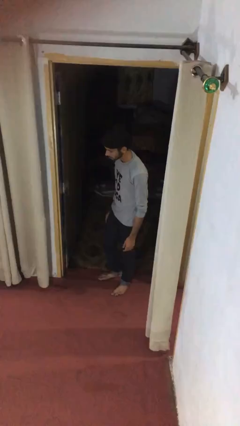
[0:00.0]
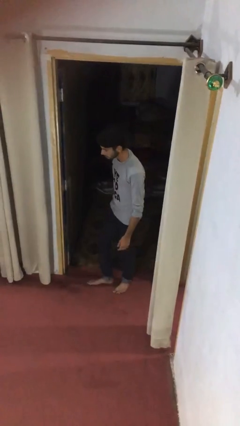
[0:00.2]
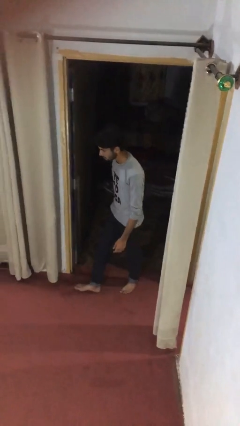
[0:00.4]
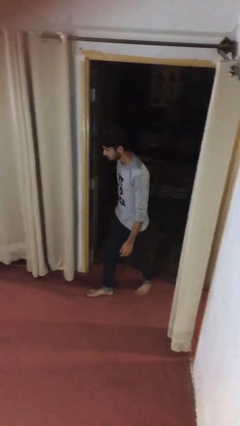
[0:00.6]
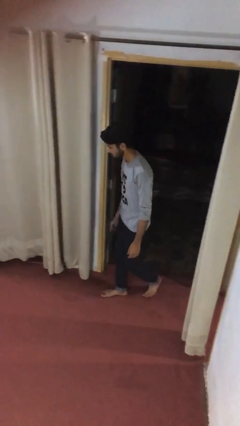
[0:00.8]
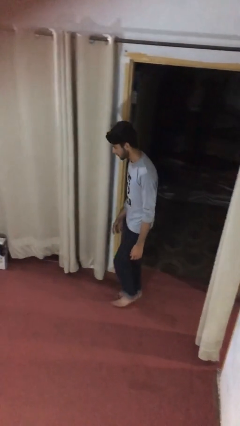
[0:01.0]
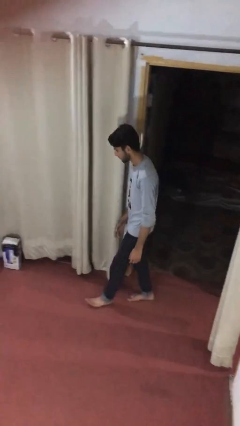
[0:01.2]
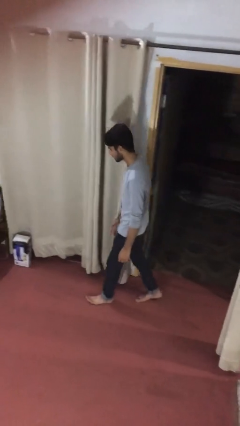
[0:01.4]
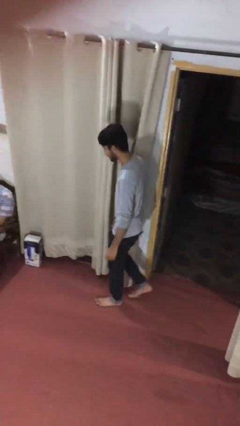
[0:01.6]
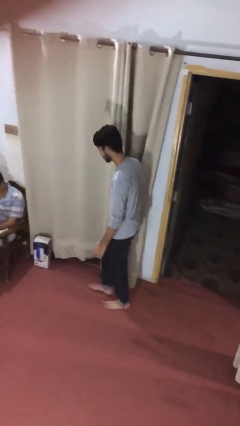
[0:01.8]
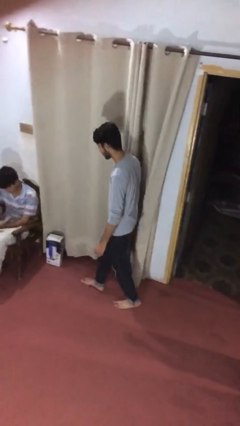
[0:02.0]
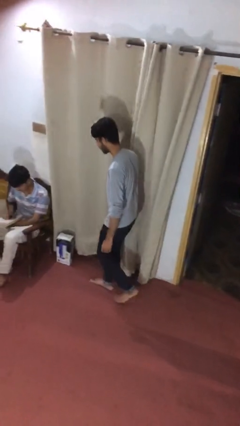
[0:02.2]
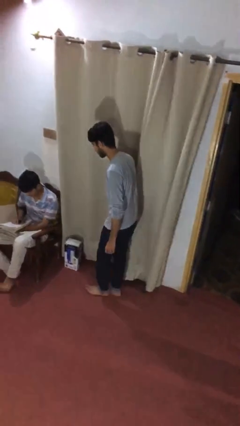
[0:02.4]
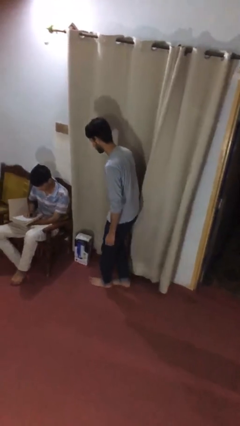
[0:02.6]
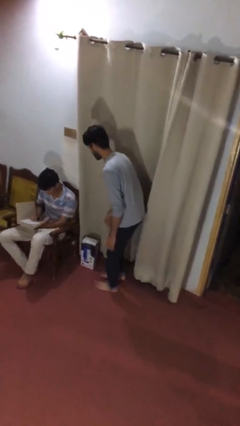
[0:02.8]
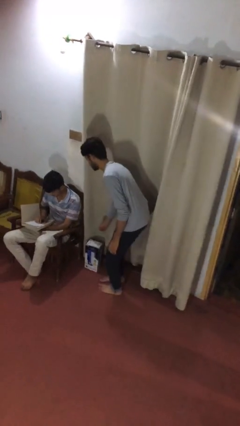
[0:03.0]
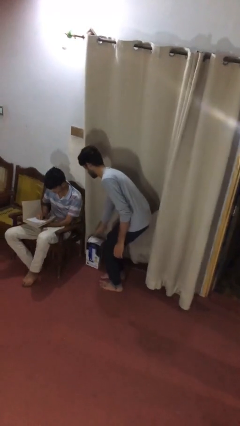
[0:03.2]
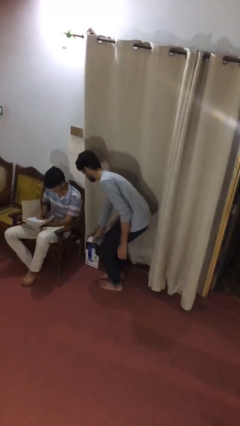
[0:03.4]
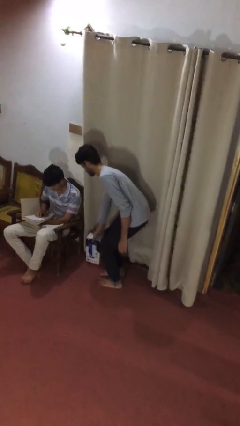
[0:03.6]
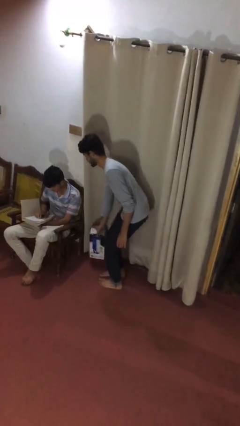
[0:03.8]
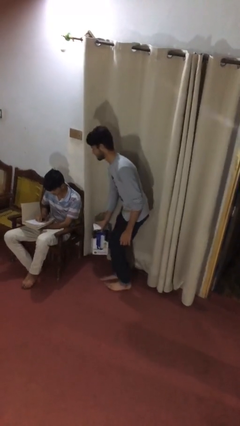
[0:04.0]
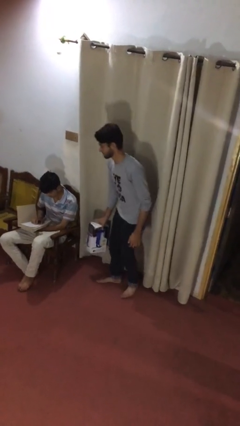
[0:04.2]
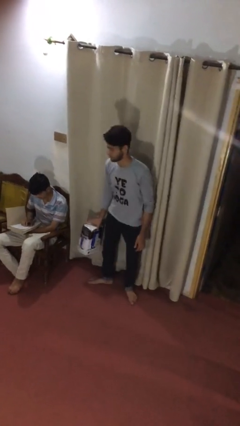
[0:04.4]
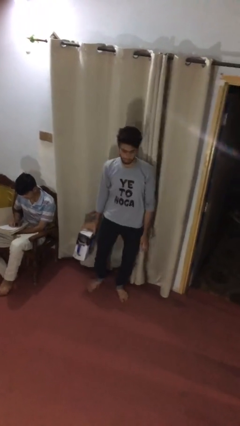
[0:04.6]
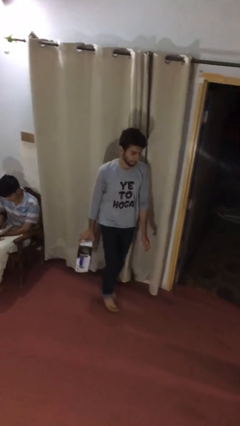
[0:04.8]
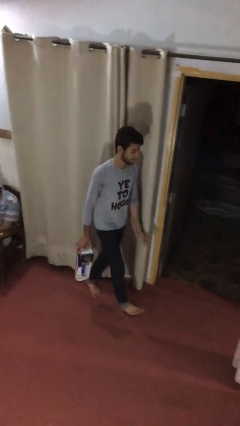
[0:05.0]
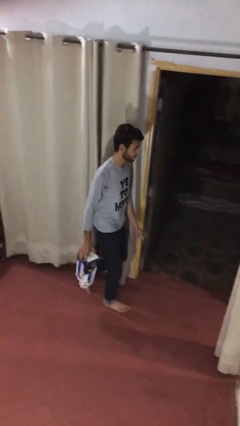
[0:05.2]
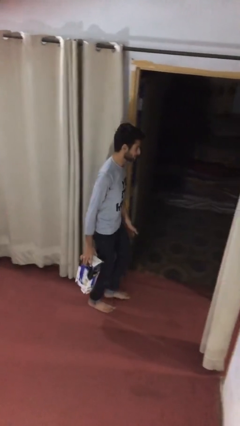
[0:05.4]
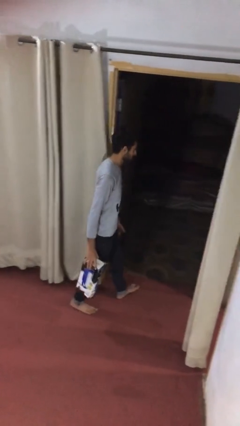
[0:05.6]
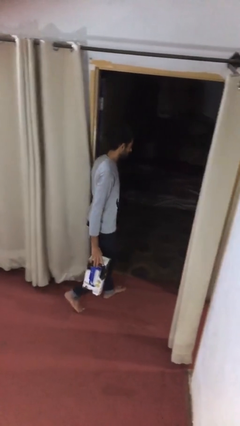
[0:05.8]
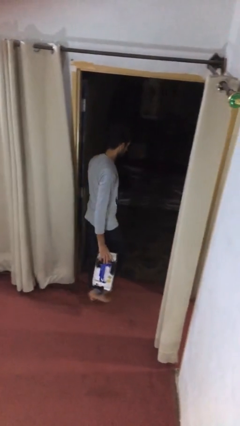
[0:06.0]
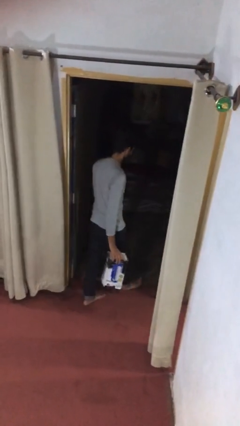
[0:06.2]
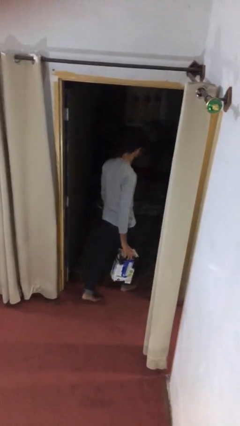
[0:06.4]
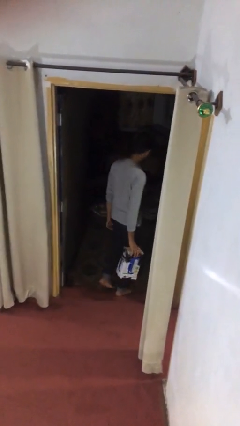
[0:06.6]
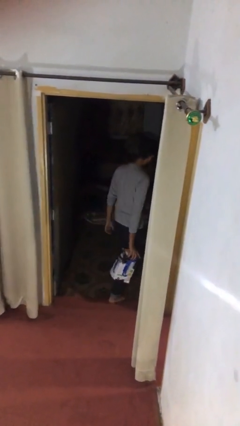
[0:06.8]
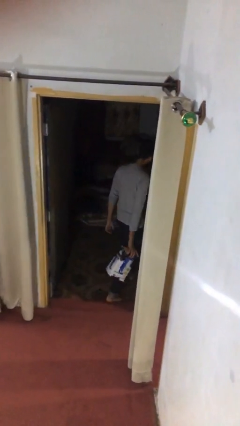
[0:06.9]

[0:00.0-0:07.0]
person steals object from person

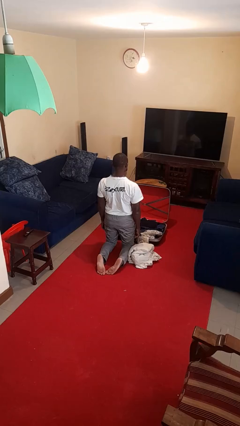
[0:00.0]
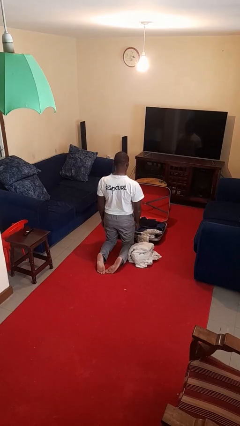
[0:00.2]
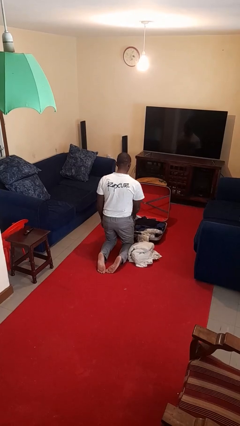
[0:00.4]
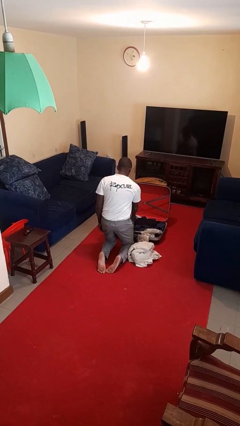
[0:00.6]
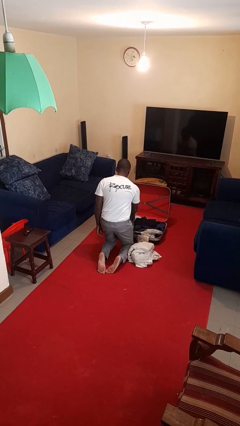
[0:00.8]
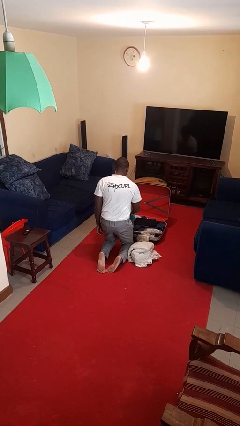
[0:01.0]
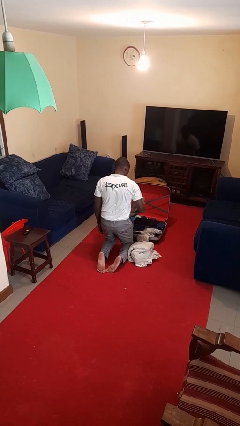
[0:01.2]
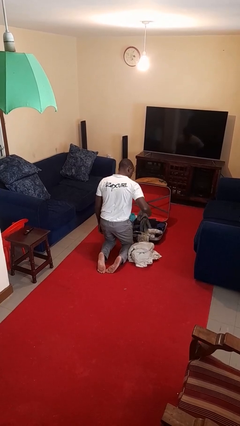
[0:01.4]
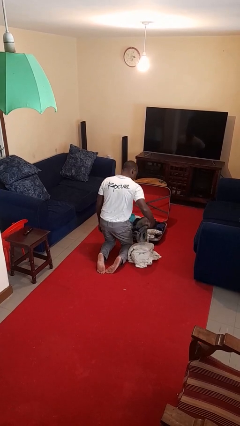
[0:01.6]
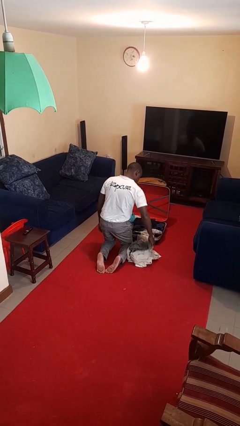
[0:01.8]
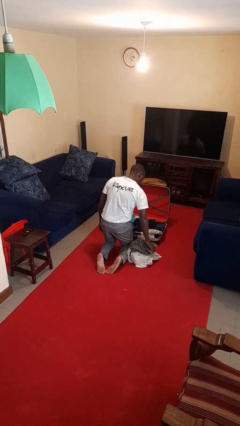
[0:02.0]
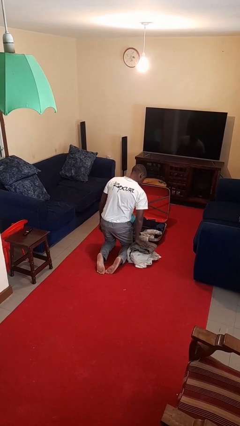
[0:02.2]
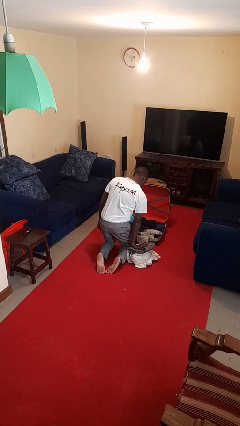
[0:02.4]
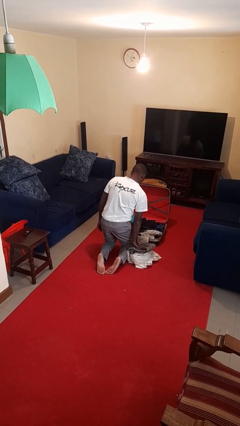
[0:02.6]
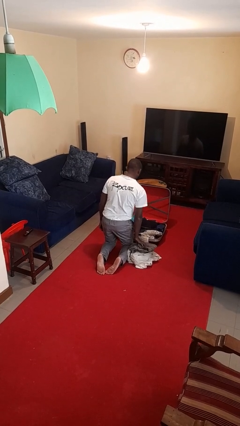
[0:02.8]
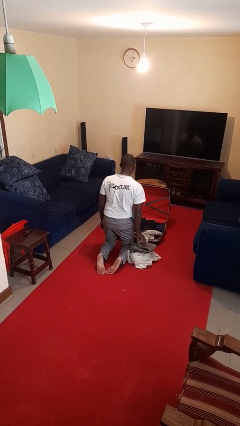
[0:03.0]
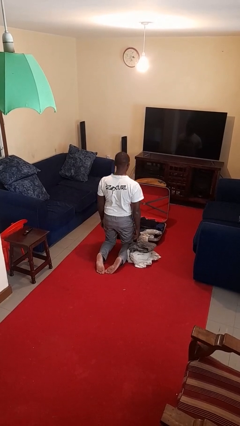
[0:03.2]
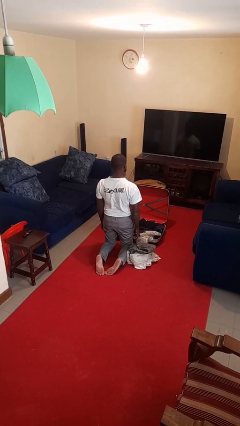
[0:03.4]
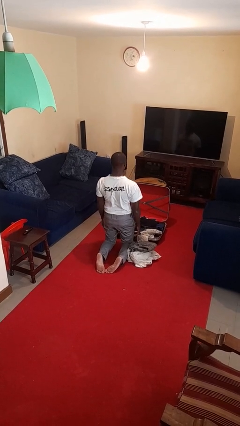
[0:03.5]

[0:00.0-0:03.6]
person unloads clothes from suitcase

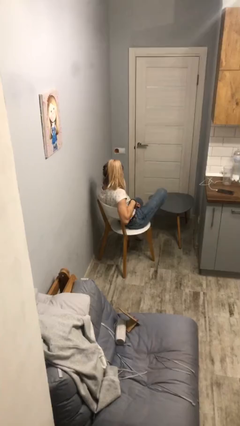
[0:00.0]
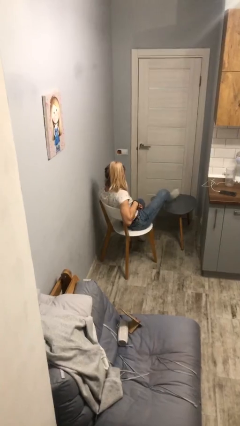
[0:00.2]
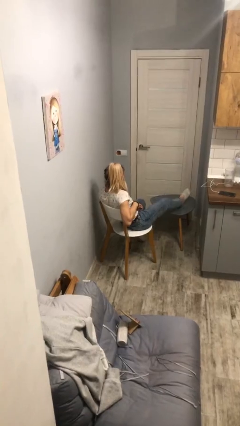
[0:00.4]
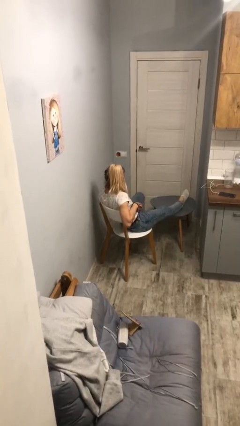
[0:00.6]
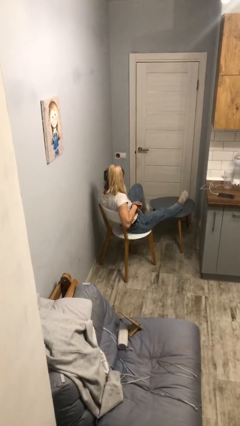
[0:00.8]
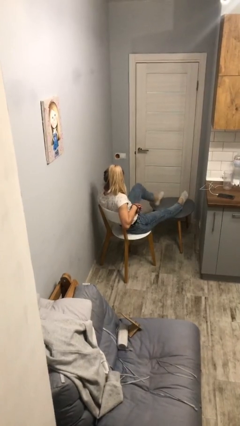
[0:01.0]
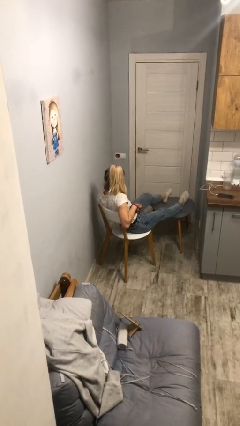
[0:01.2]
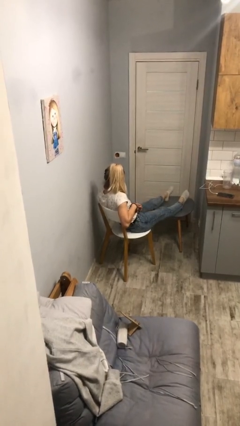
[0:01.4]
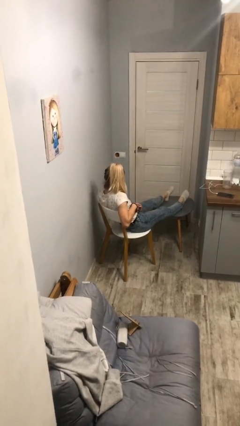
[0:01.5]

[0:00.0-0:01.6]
person puts feet up

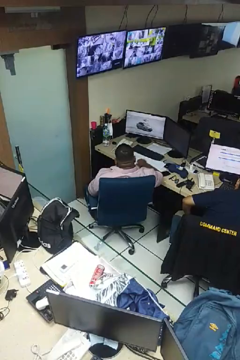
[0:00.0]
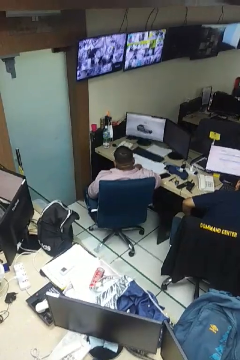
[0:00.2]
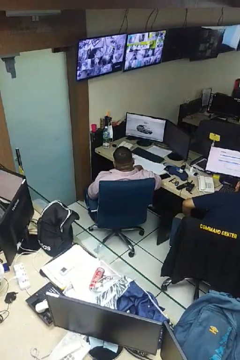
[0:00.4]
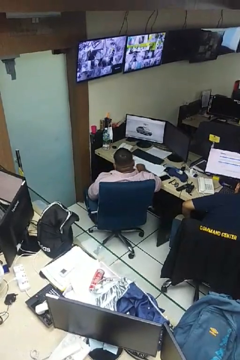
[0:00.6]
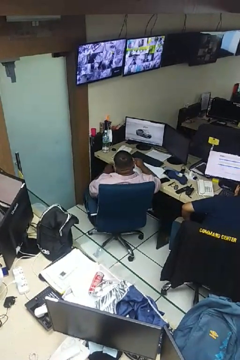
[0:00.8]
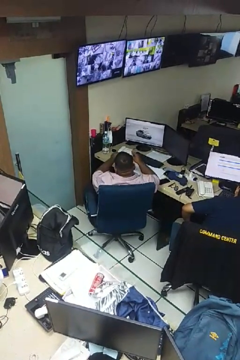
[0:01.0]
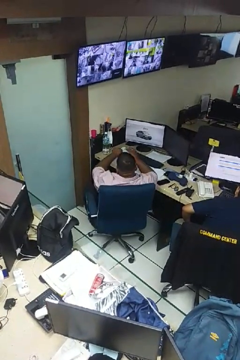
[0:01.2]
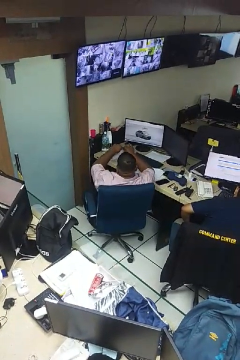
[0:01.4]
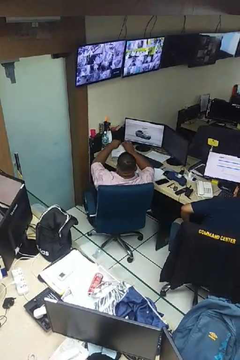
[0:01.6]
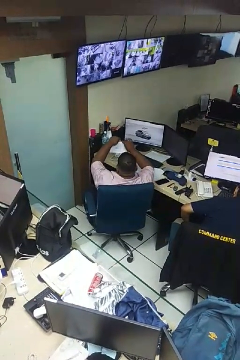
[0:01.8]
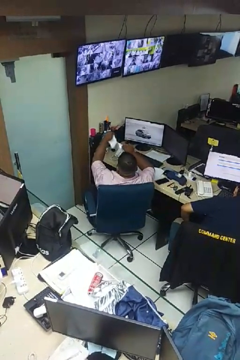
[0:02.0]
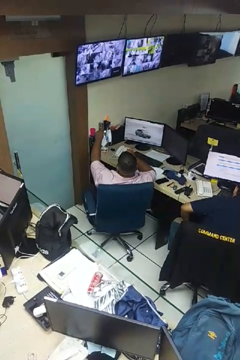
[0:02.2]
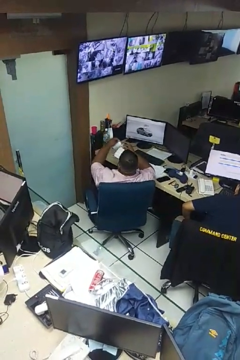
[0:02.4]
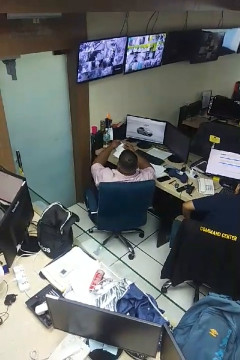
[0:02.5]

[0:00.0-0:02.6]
person tears paper

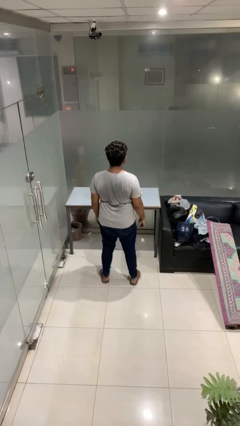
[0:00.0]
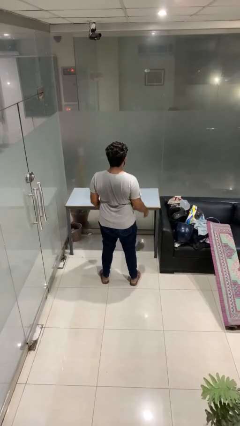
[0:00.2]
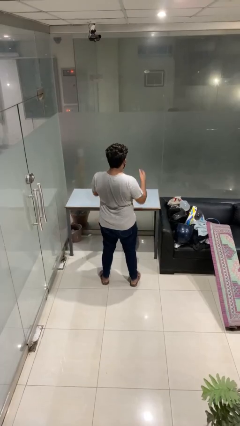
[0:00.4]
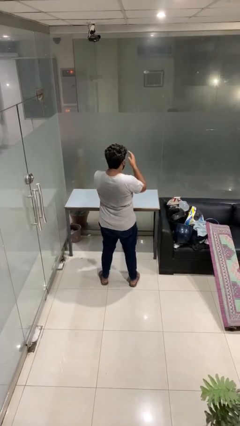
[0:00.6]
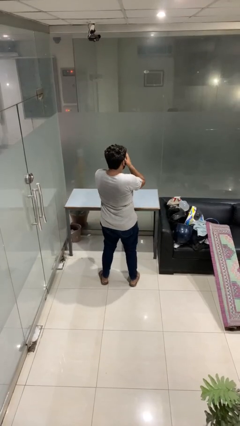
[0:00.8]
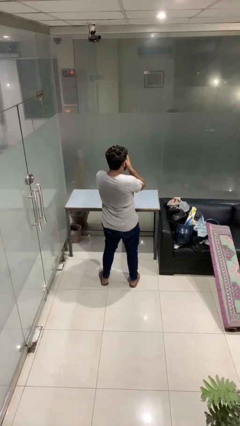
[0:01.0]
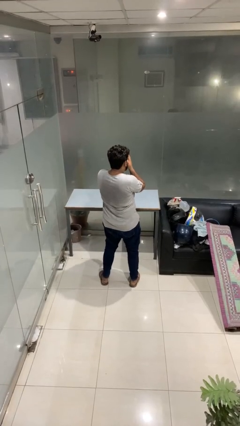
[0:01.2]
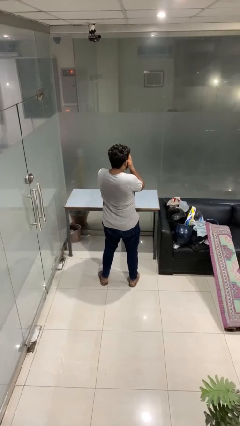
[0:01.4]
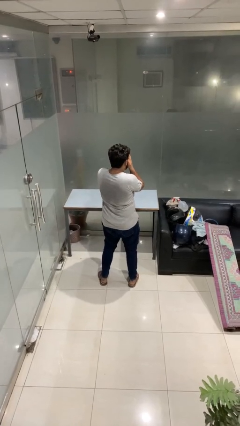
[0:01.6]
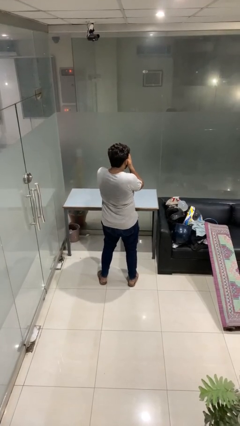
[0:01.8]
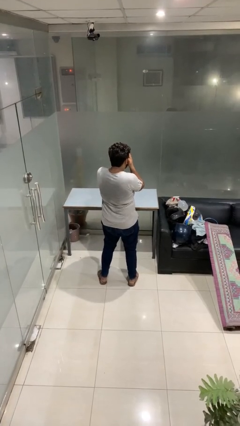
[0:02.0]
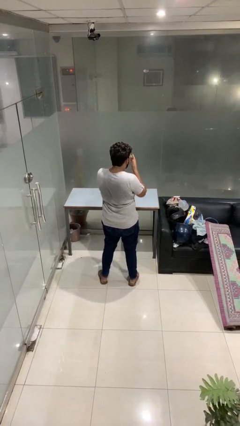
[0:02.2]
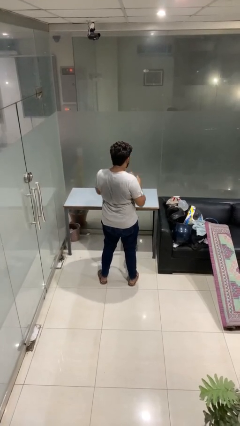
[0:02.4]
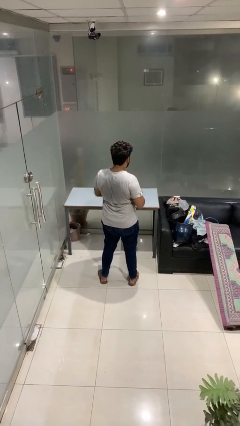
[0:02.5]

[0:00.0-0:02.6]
person covers face with hands

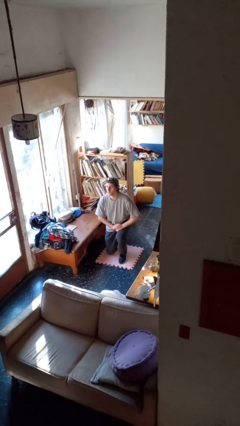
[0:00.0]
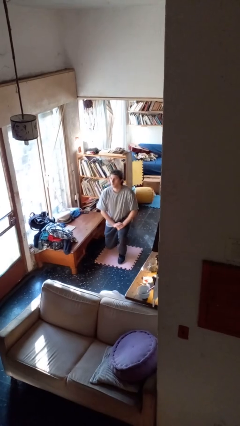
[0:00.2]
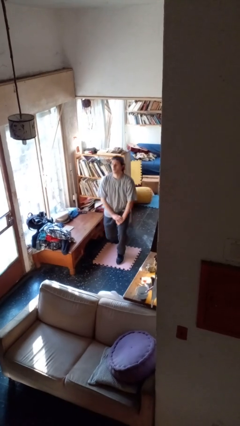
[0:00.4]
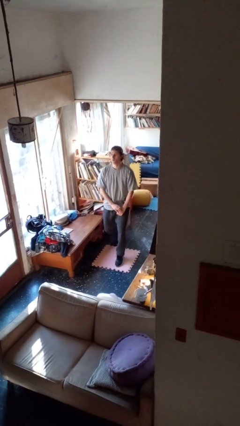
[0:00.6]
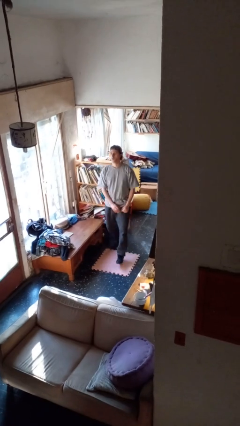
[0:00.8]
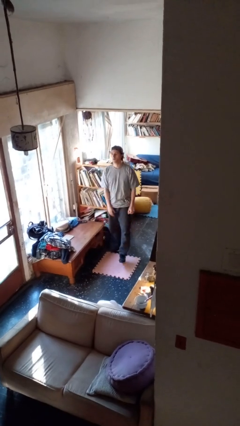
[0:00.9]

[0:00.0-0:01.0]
person stands up from floor
